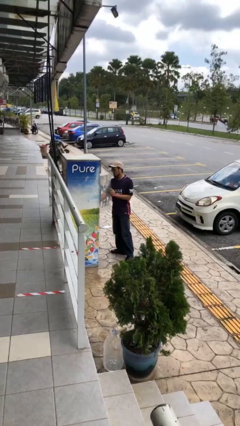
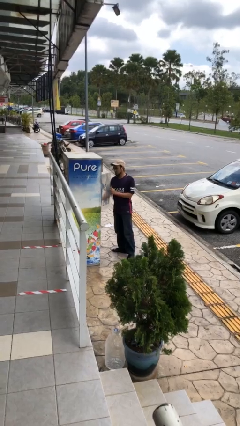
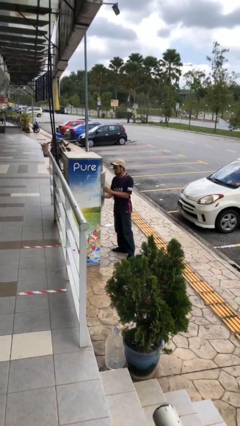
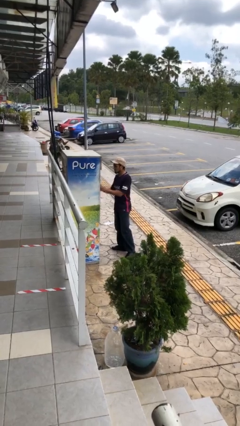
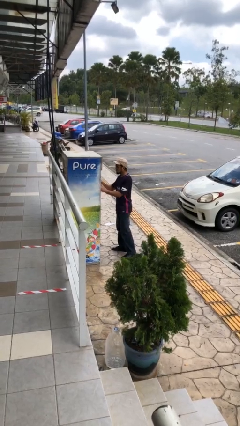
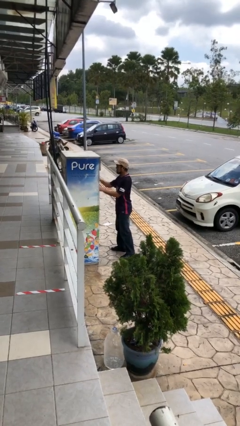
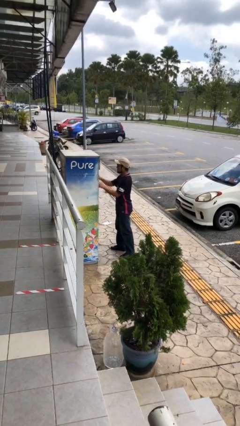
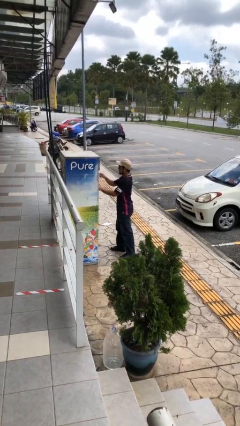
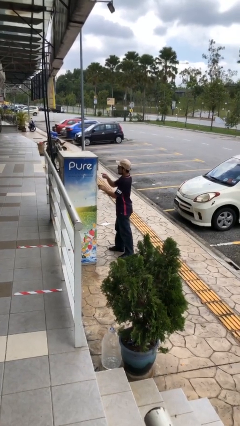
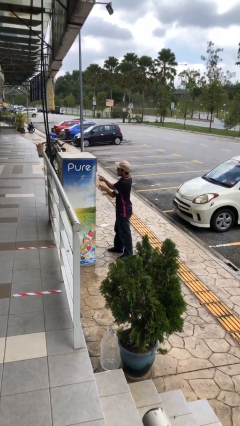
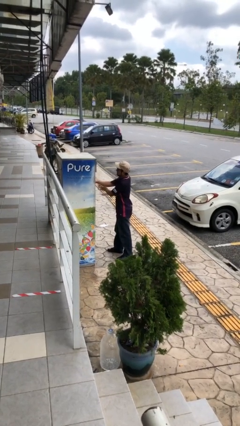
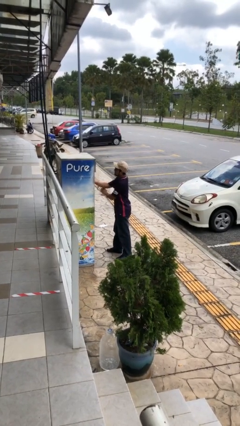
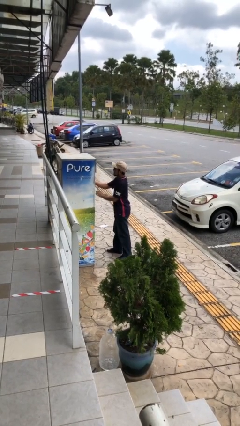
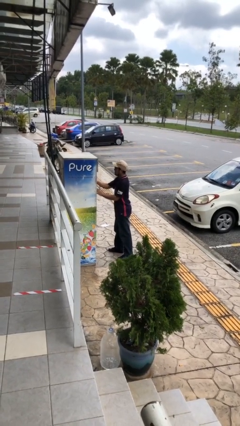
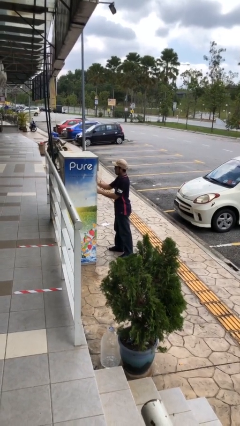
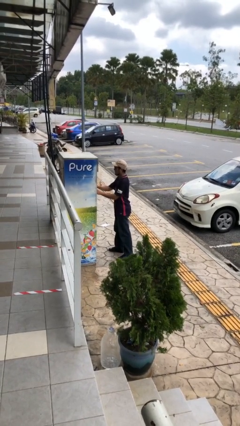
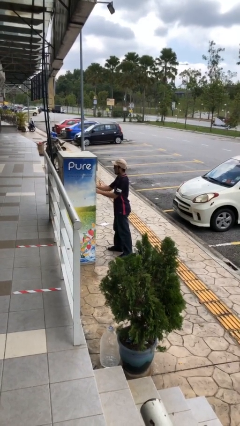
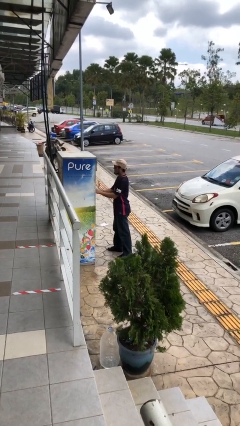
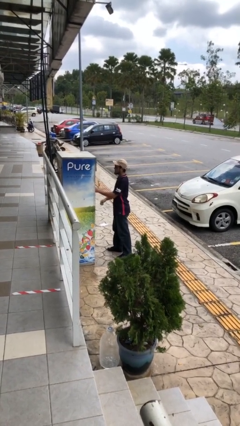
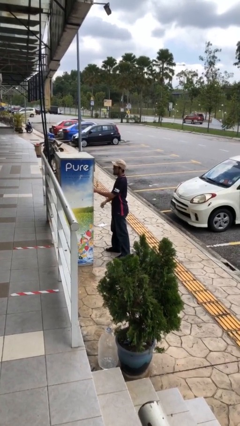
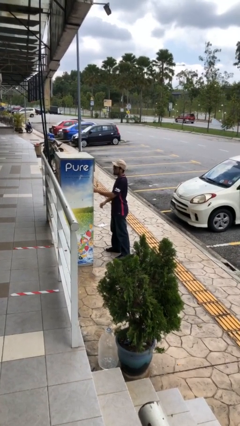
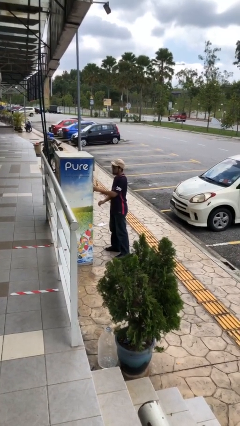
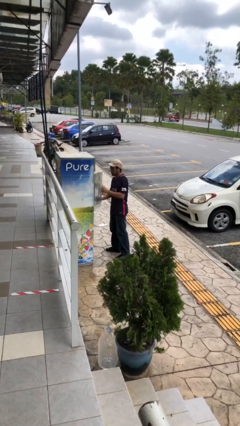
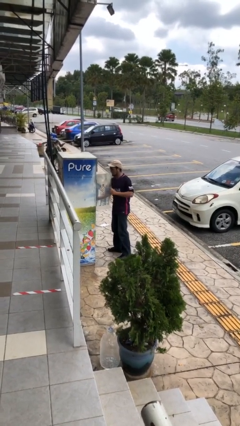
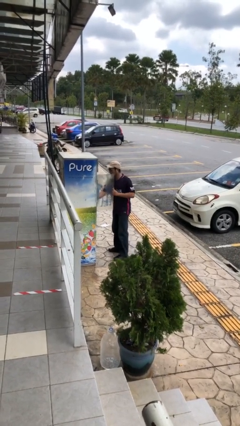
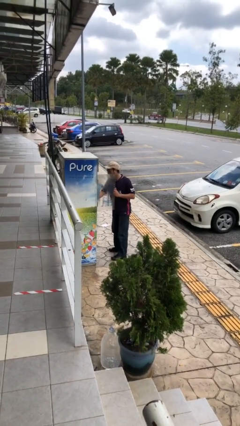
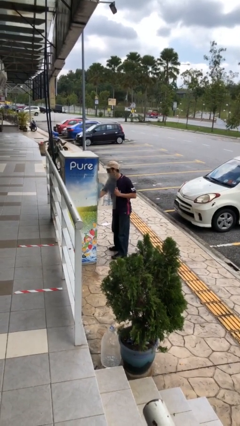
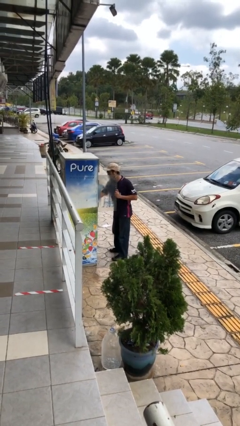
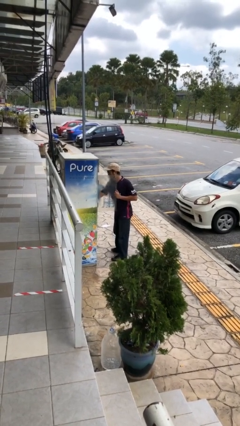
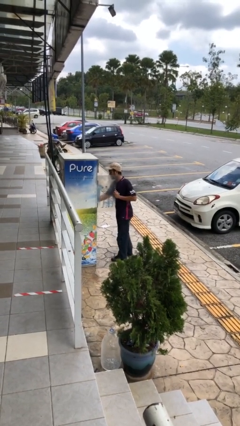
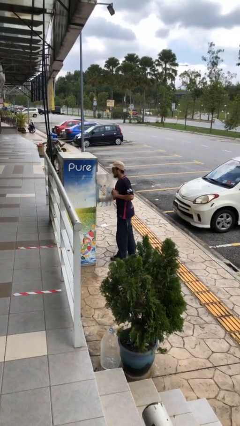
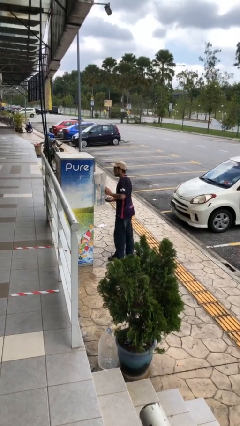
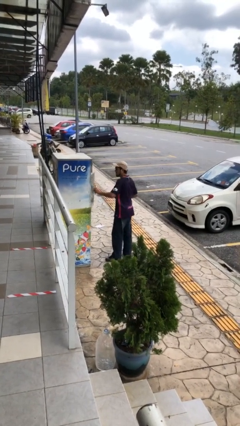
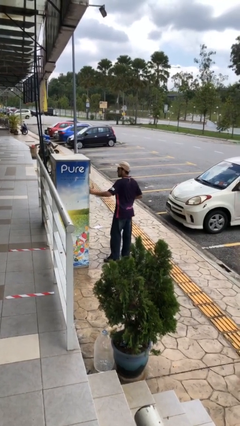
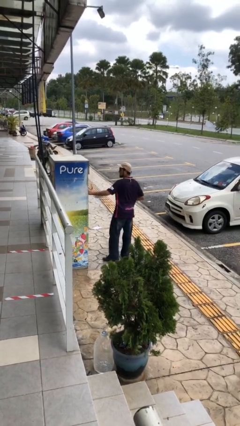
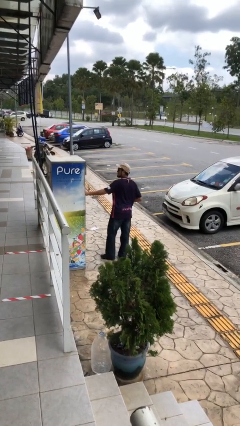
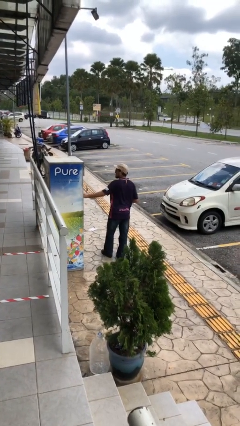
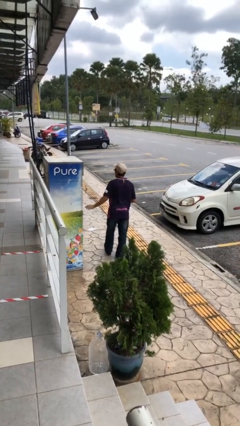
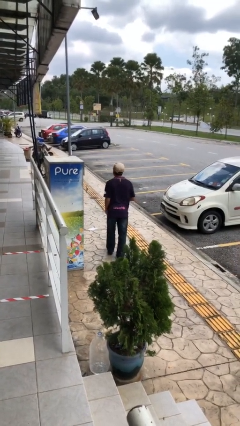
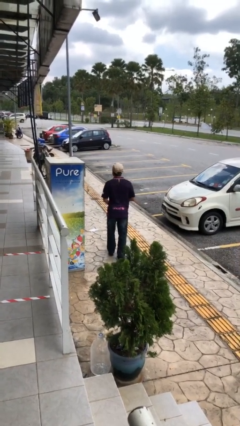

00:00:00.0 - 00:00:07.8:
person purchases from machine

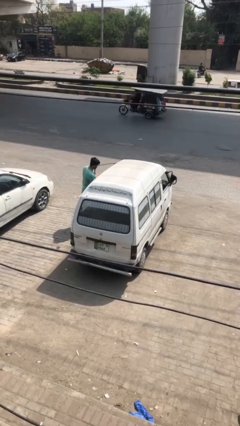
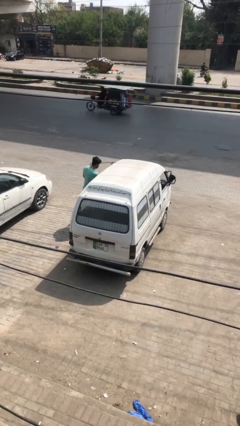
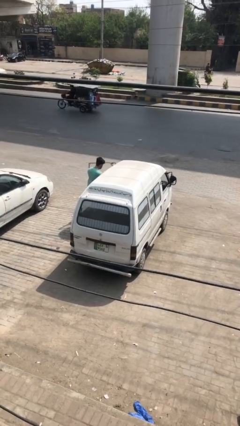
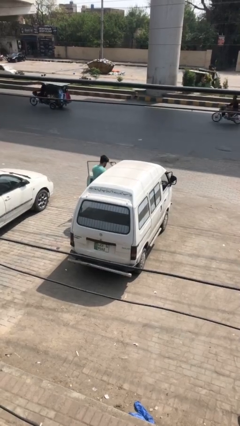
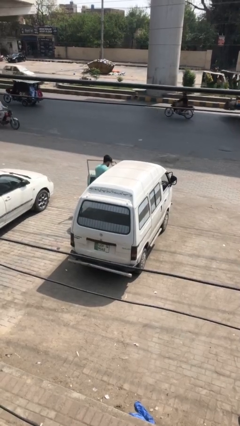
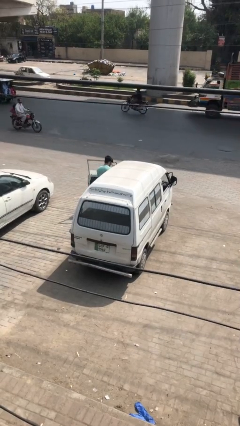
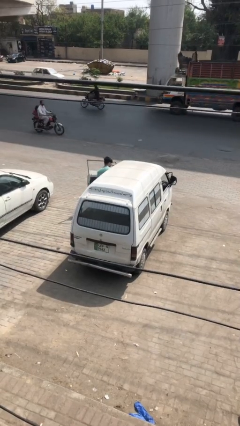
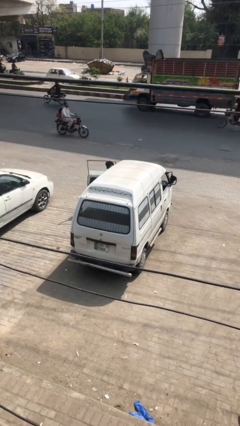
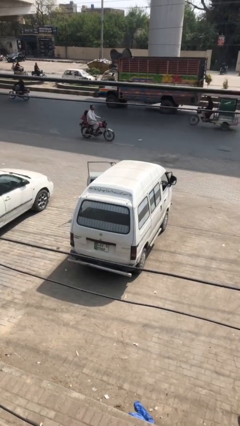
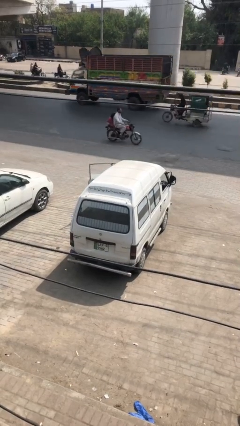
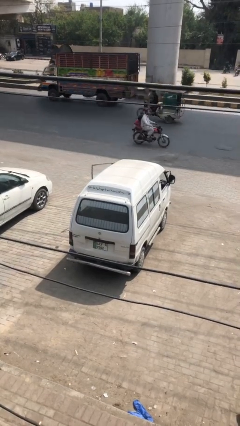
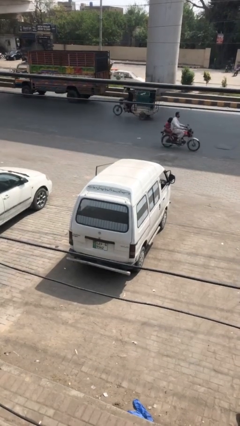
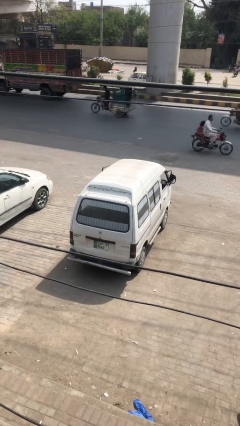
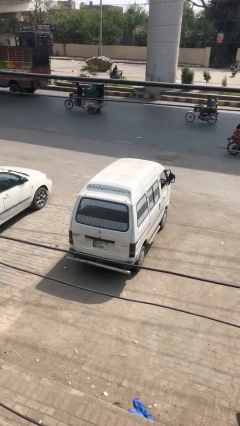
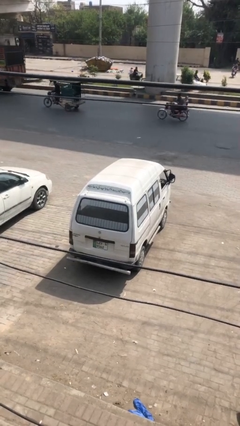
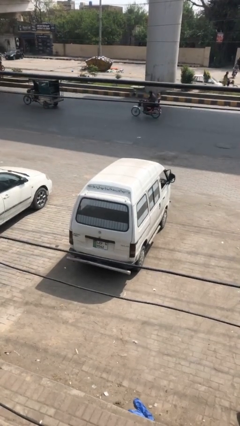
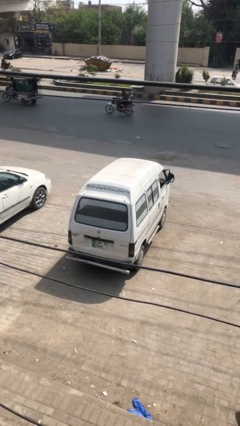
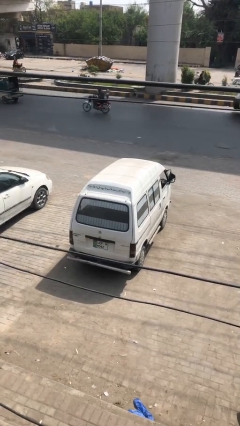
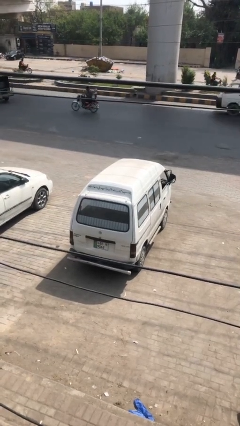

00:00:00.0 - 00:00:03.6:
car picks up person

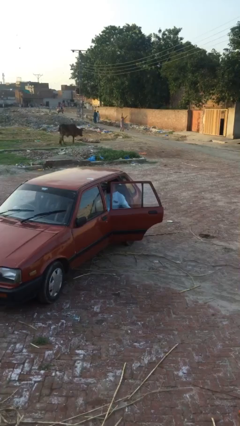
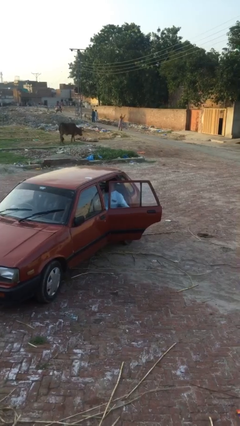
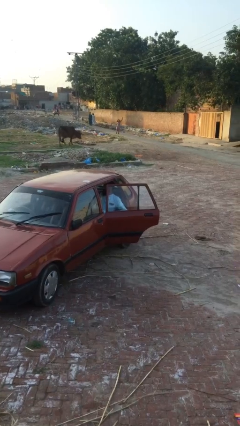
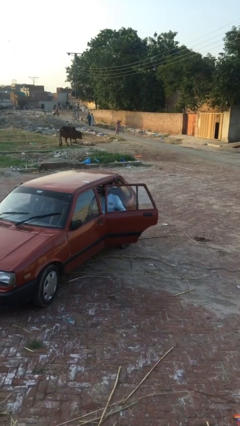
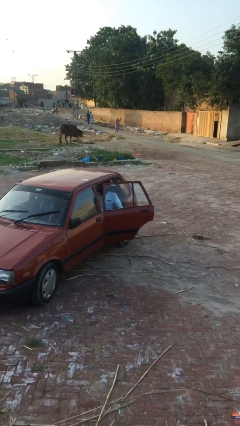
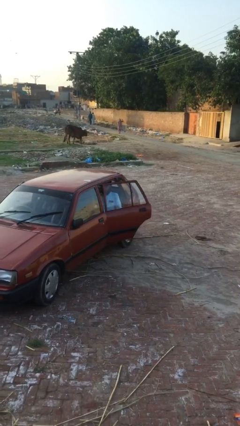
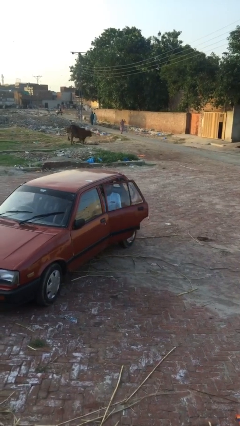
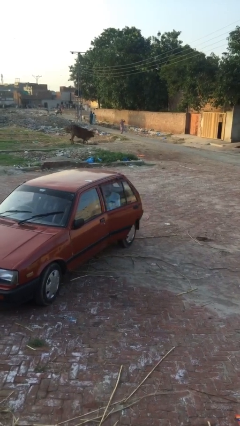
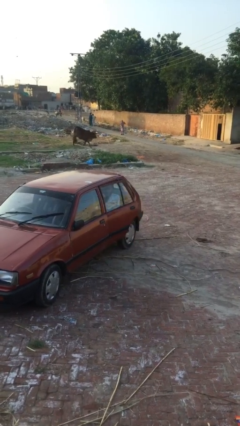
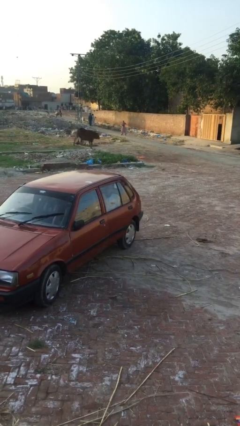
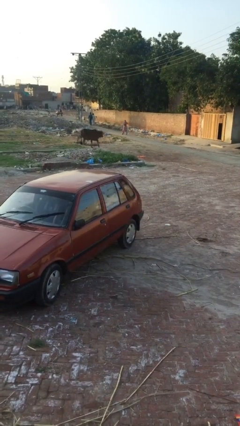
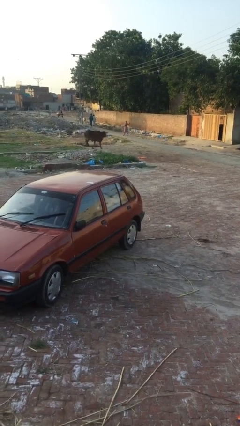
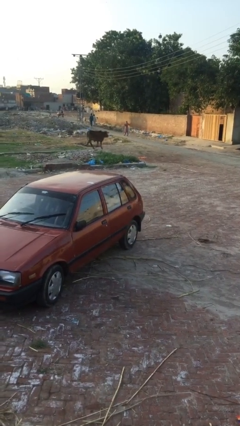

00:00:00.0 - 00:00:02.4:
person closes car door

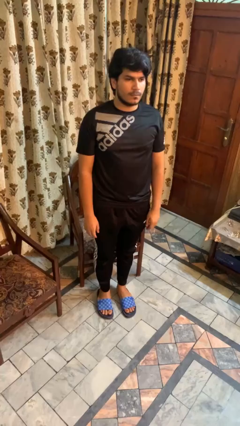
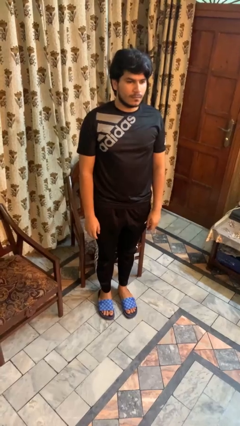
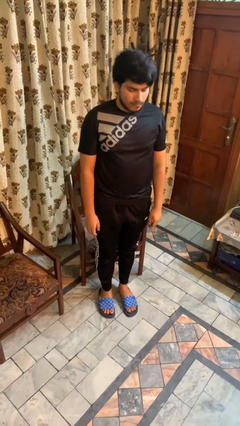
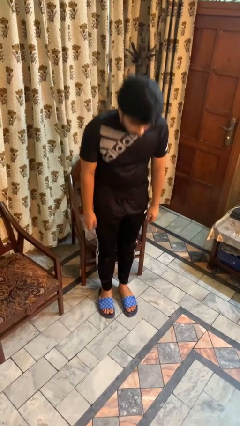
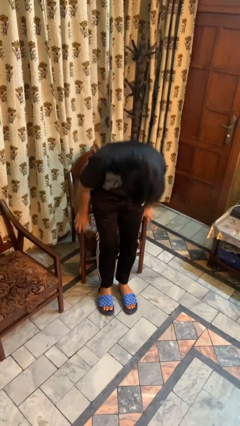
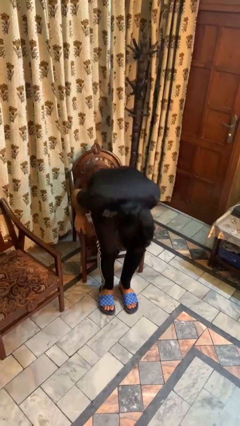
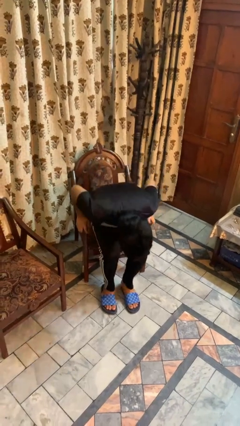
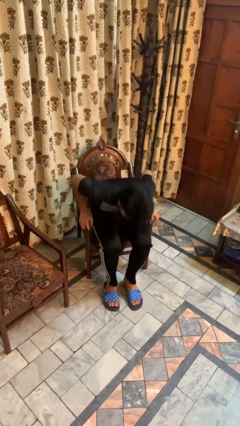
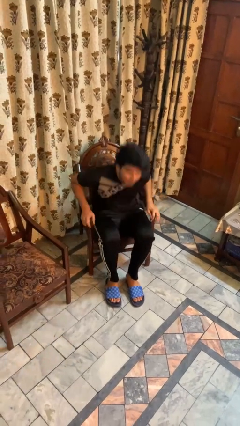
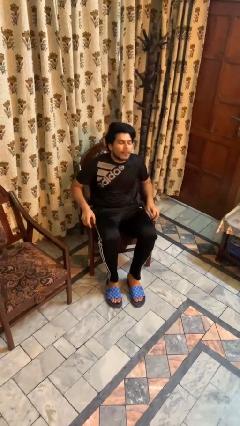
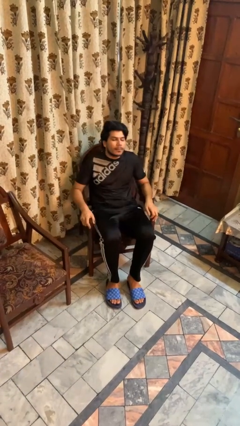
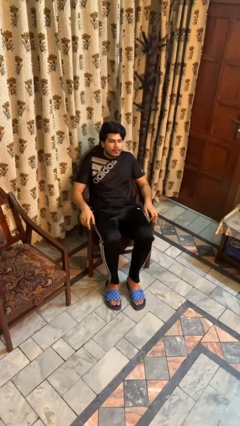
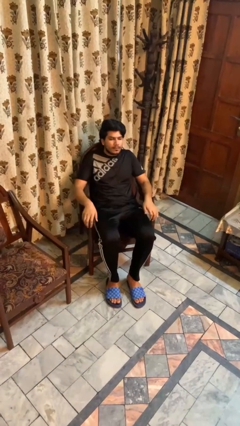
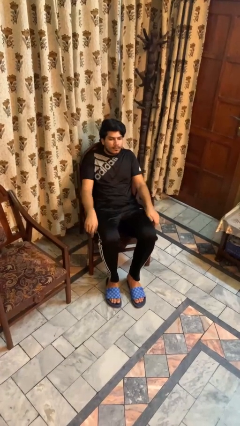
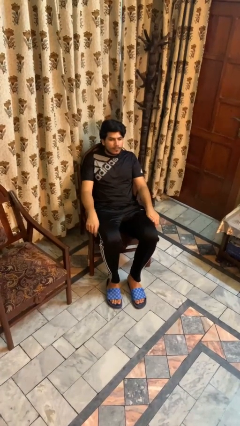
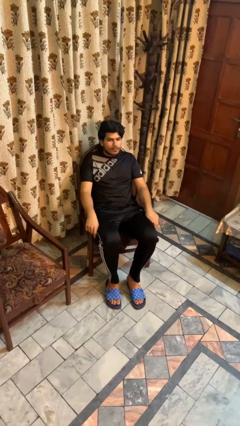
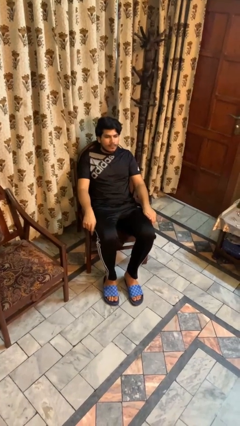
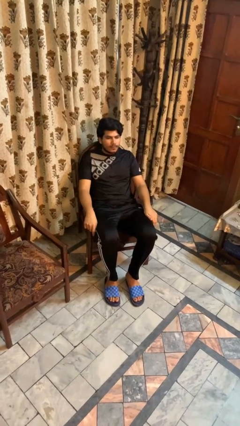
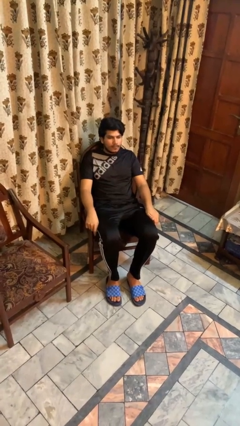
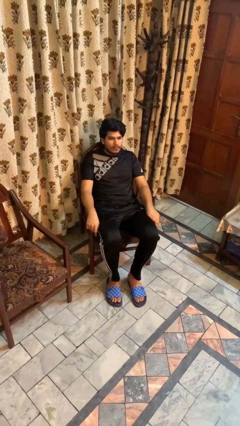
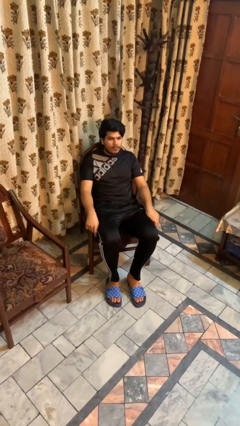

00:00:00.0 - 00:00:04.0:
person sits down

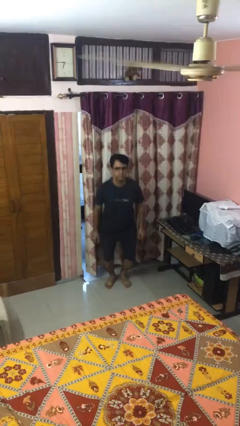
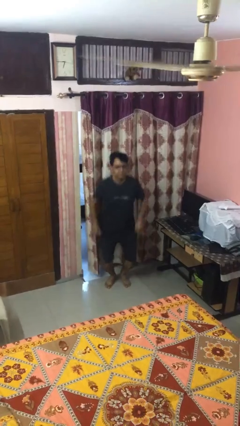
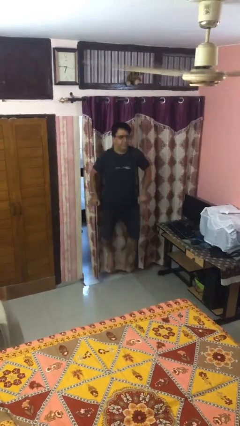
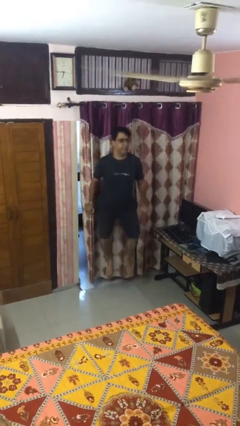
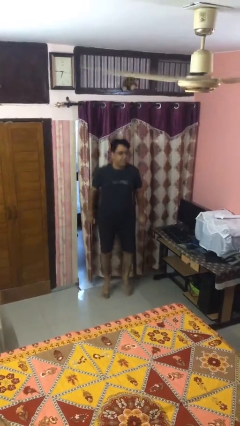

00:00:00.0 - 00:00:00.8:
person jumps
